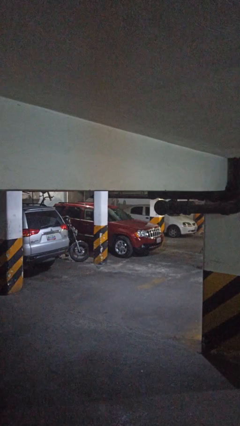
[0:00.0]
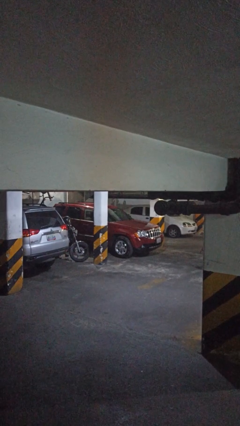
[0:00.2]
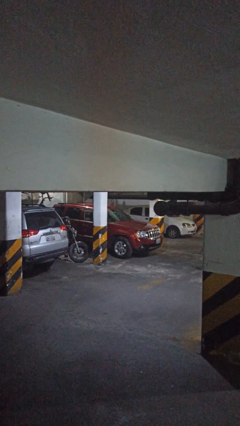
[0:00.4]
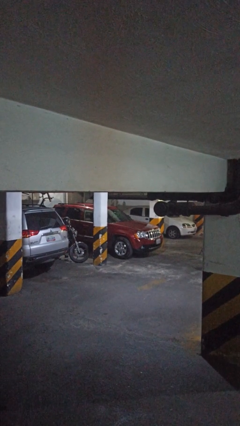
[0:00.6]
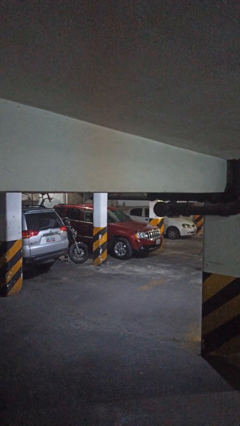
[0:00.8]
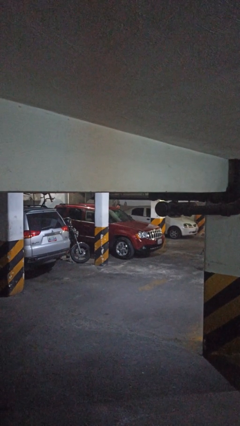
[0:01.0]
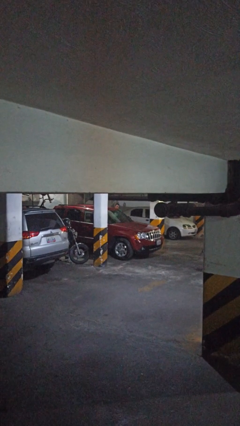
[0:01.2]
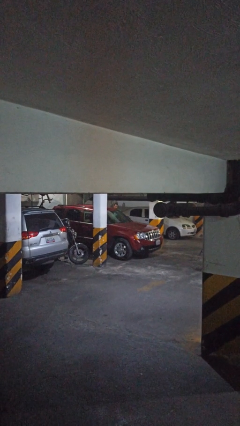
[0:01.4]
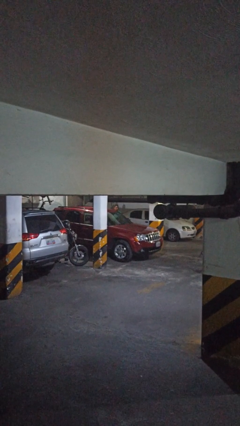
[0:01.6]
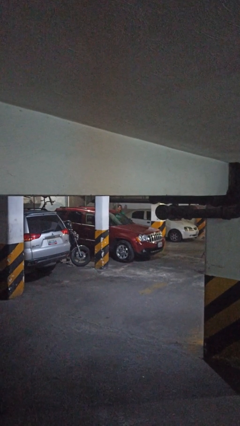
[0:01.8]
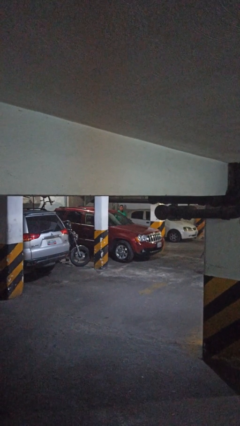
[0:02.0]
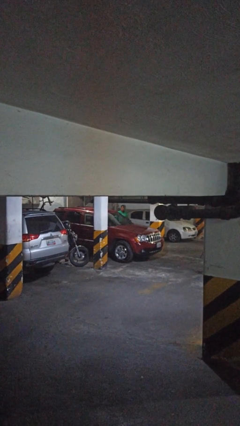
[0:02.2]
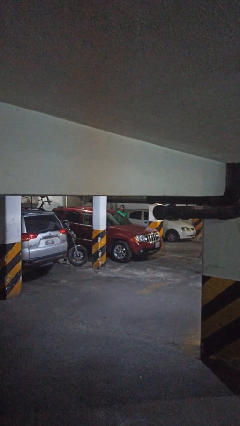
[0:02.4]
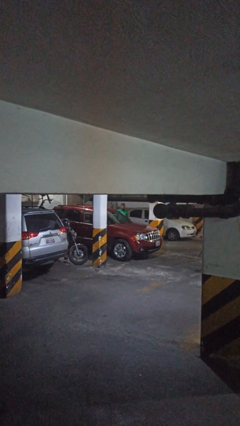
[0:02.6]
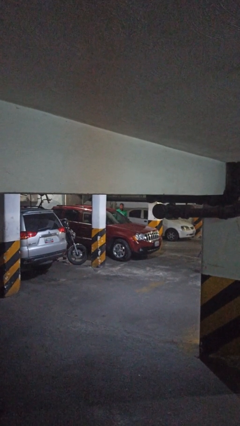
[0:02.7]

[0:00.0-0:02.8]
person exits car

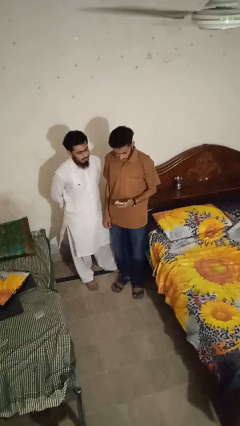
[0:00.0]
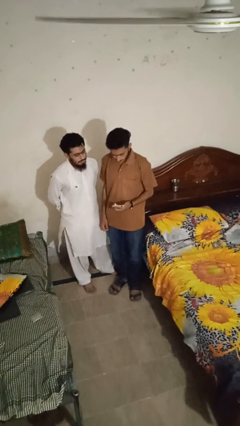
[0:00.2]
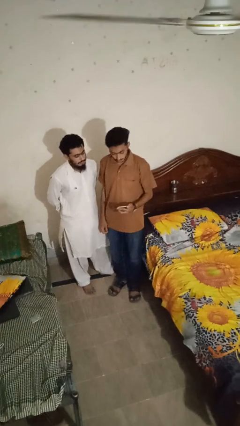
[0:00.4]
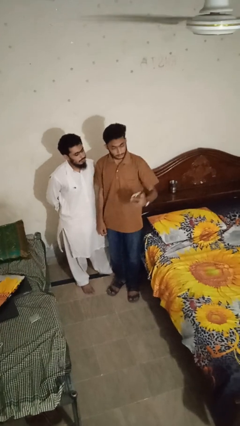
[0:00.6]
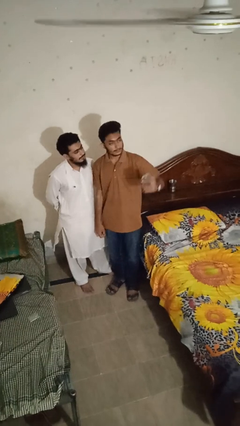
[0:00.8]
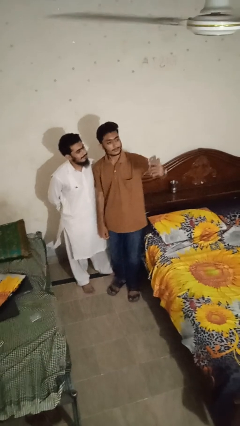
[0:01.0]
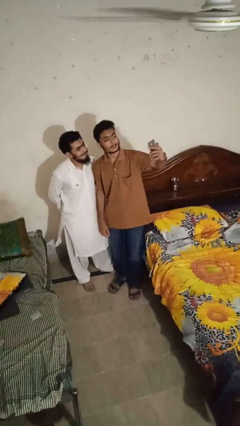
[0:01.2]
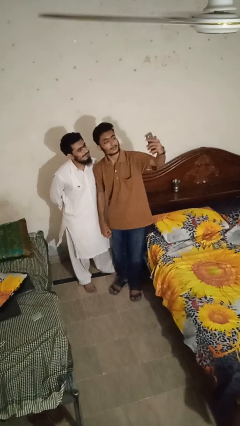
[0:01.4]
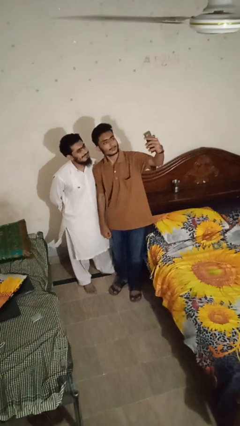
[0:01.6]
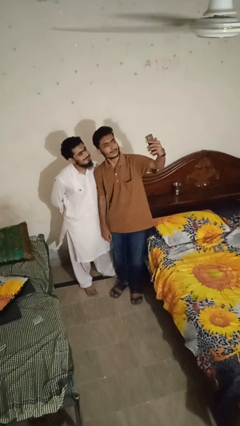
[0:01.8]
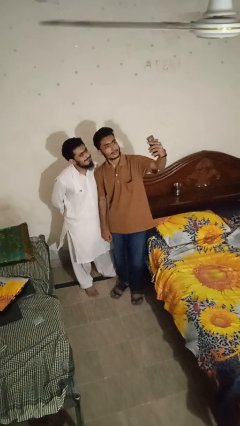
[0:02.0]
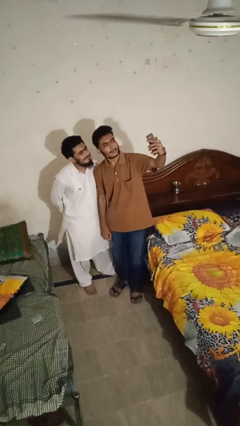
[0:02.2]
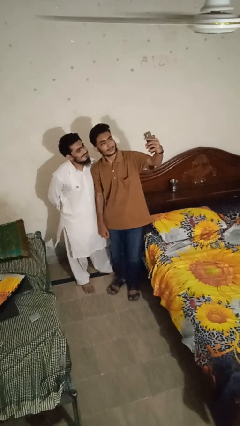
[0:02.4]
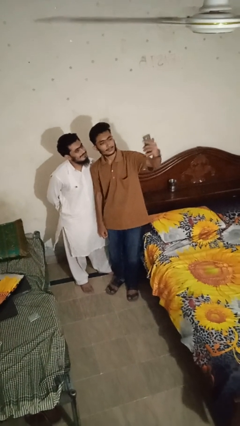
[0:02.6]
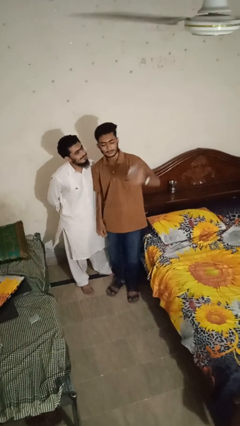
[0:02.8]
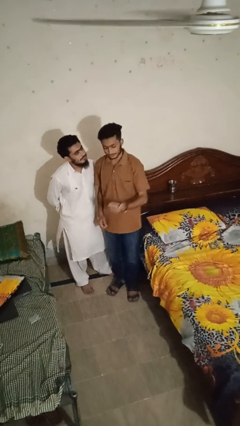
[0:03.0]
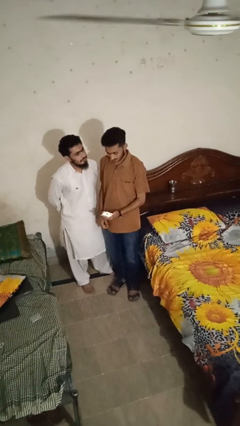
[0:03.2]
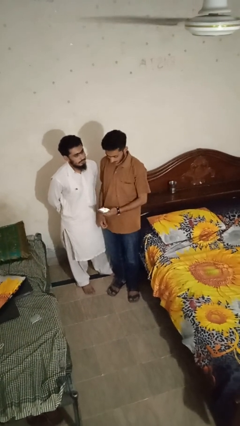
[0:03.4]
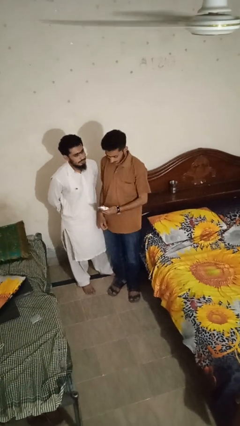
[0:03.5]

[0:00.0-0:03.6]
person takes selfie with person

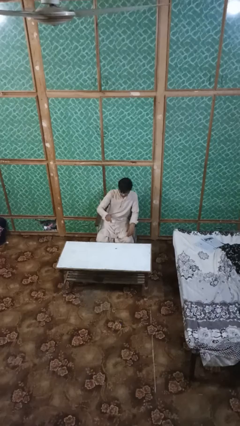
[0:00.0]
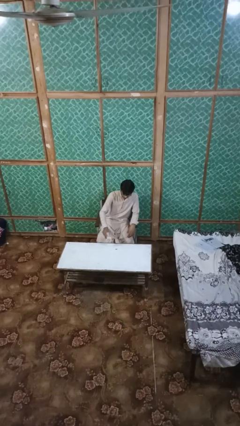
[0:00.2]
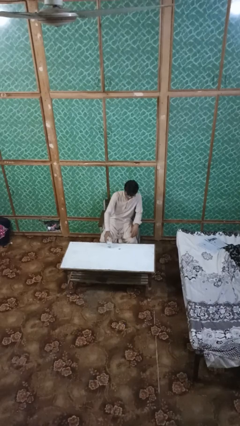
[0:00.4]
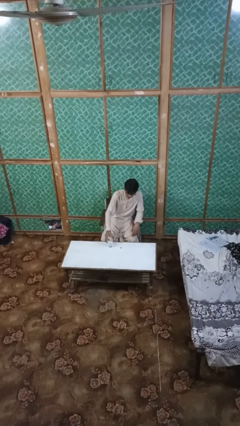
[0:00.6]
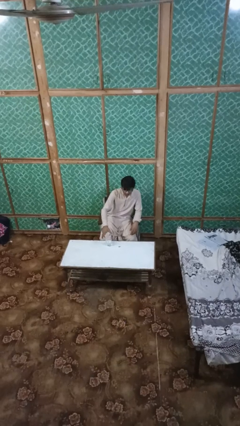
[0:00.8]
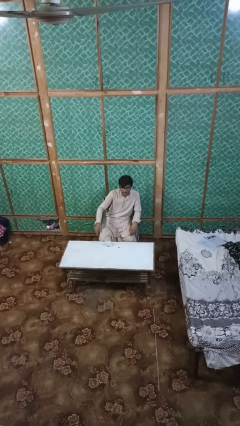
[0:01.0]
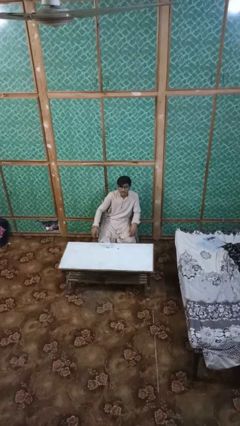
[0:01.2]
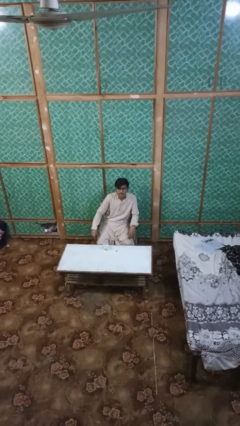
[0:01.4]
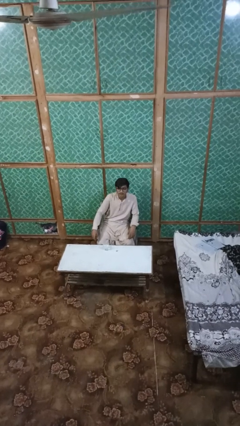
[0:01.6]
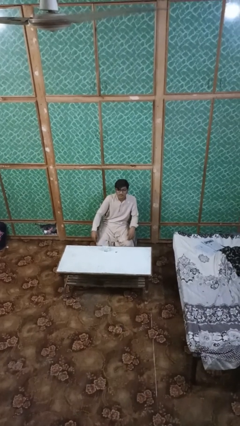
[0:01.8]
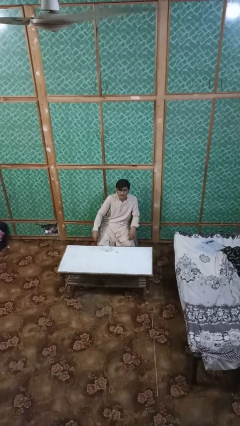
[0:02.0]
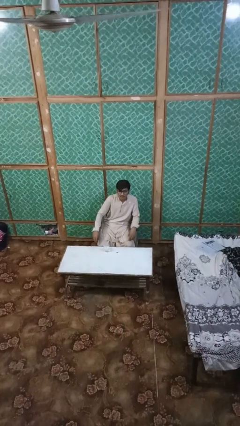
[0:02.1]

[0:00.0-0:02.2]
person puts down object on table

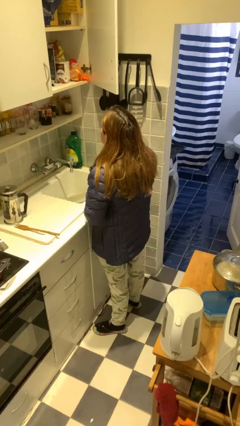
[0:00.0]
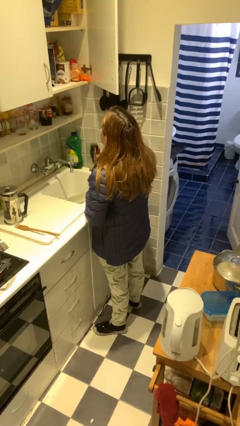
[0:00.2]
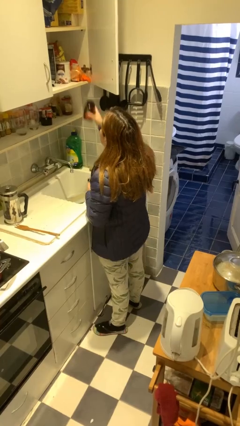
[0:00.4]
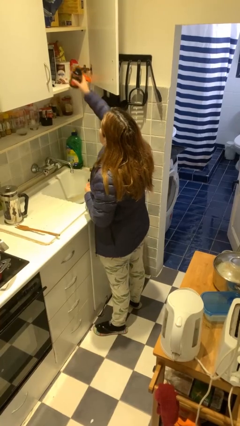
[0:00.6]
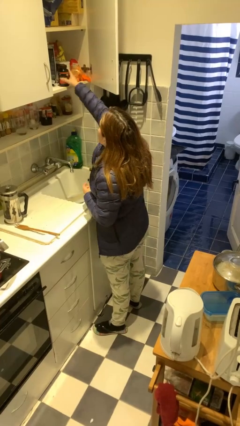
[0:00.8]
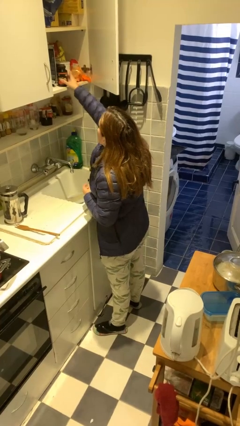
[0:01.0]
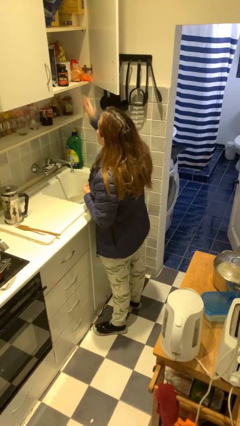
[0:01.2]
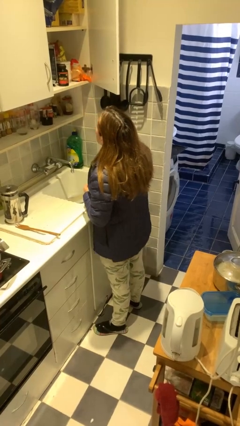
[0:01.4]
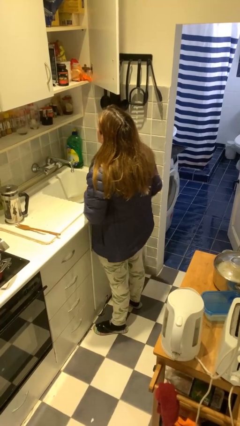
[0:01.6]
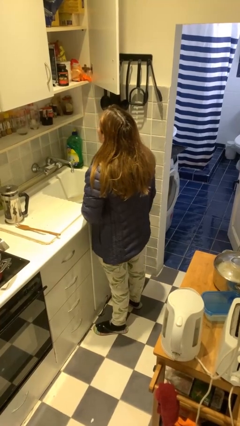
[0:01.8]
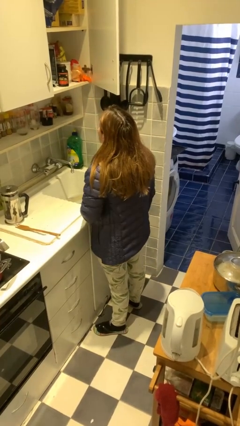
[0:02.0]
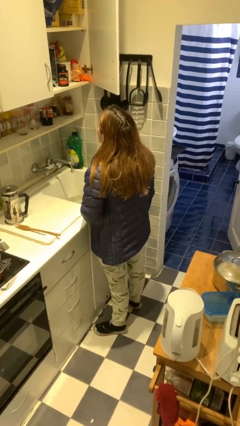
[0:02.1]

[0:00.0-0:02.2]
person puts object in cabinet

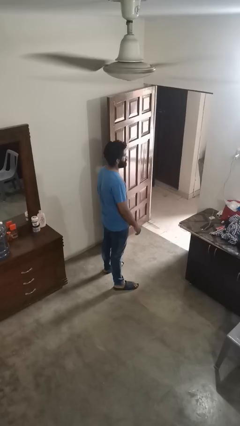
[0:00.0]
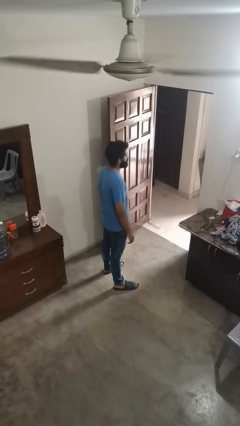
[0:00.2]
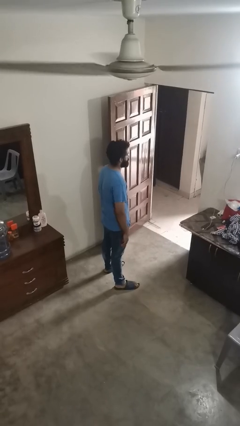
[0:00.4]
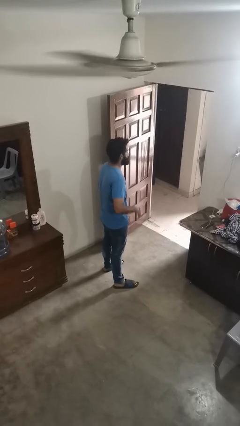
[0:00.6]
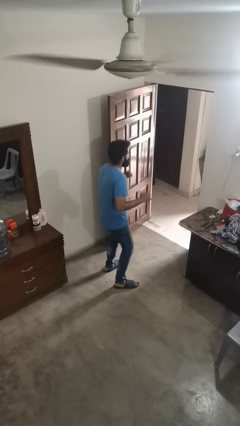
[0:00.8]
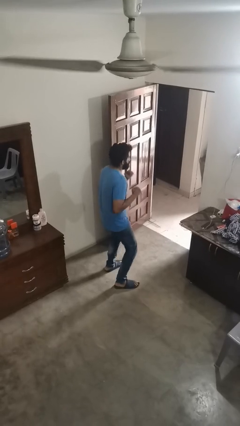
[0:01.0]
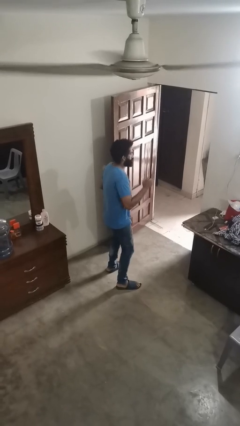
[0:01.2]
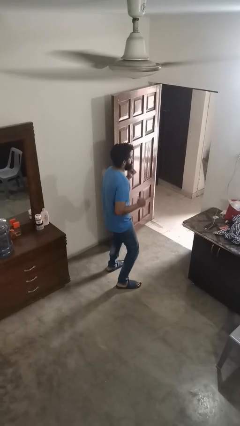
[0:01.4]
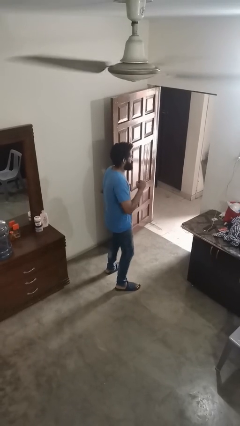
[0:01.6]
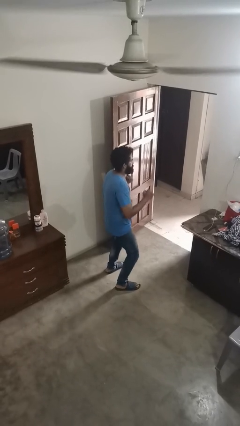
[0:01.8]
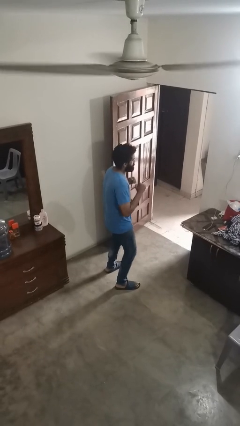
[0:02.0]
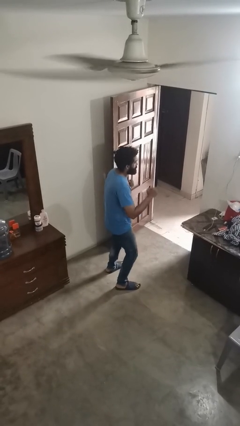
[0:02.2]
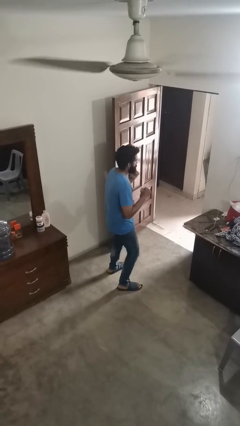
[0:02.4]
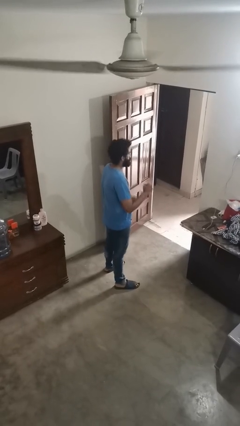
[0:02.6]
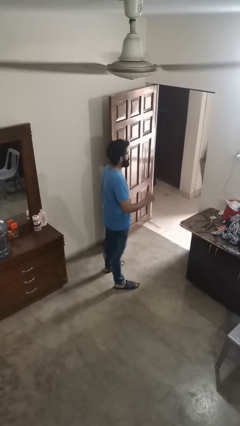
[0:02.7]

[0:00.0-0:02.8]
person dances in place

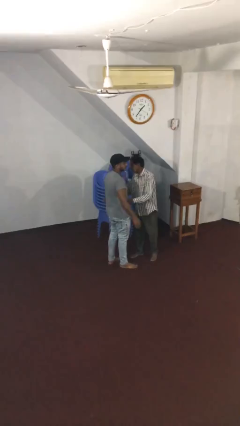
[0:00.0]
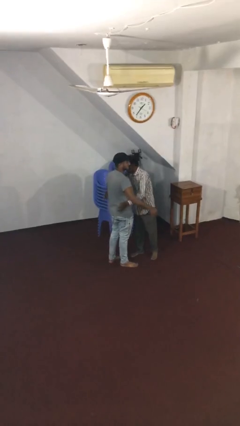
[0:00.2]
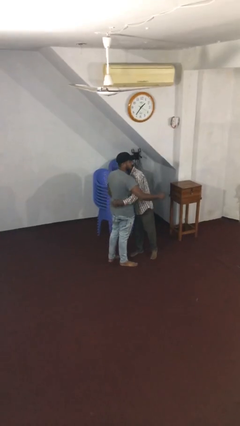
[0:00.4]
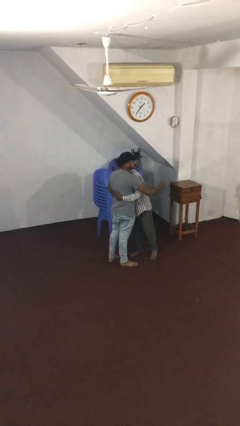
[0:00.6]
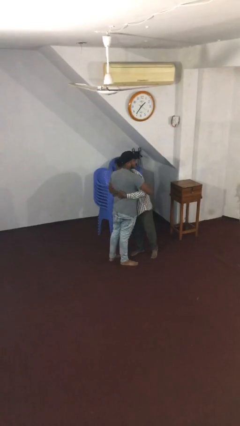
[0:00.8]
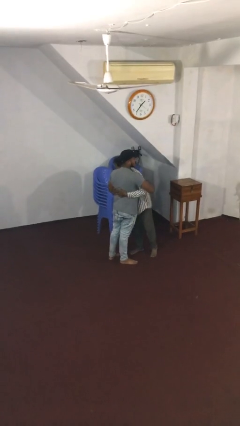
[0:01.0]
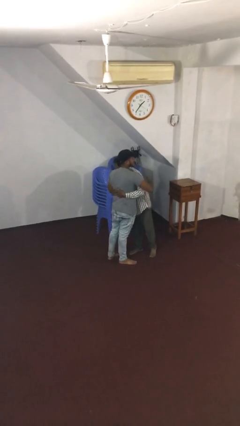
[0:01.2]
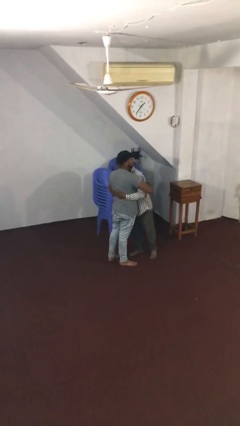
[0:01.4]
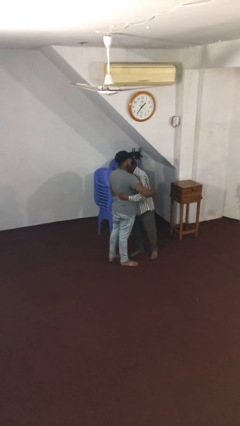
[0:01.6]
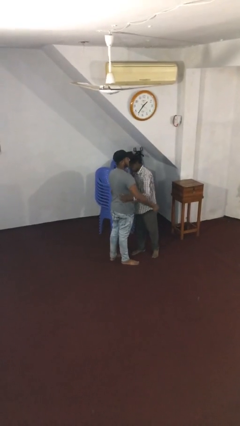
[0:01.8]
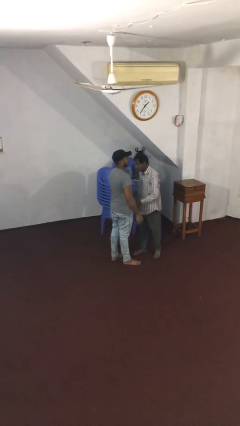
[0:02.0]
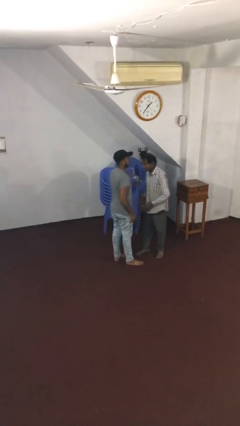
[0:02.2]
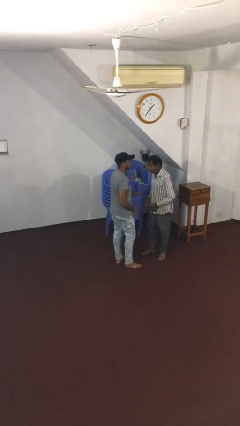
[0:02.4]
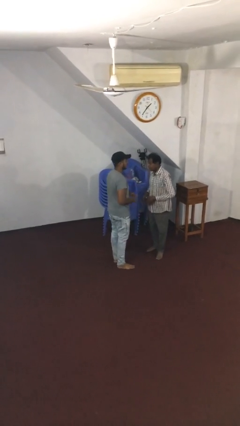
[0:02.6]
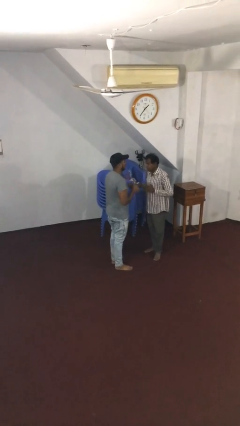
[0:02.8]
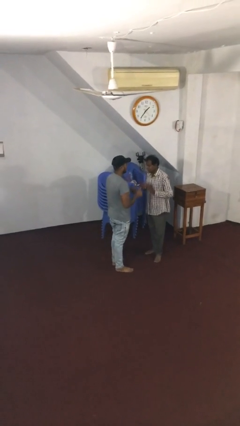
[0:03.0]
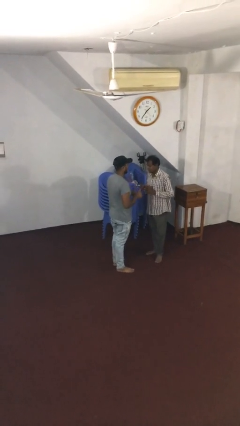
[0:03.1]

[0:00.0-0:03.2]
person embraces person

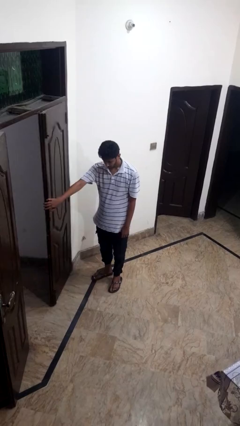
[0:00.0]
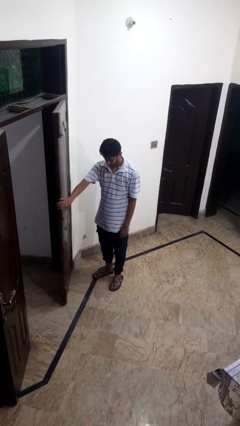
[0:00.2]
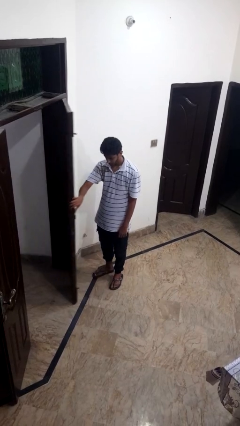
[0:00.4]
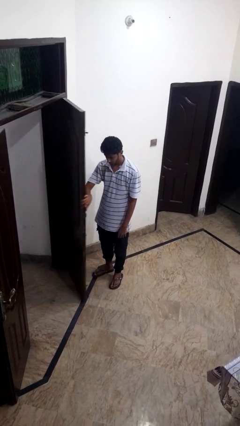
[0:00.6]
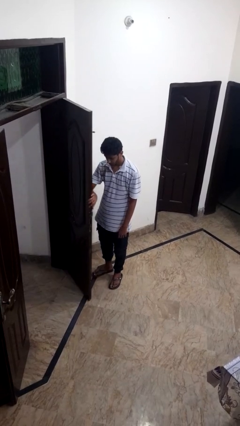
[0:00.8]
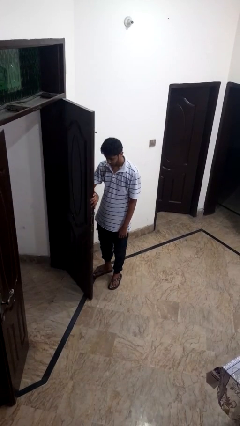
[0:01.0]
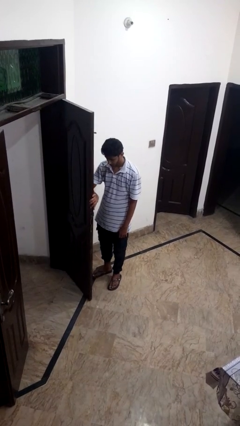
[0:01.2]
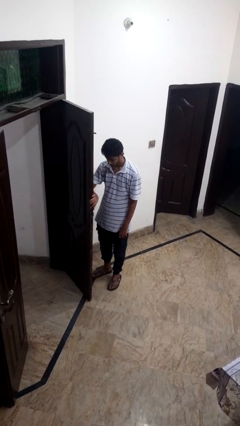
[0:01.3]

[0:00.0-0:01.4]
person opens facility door
